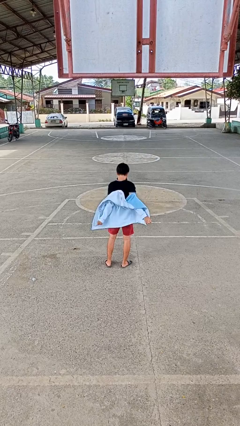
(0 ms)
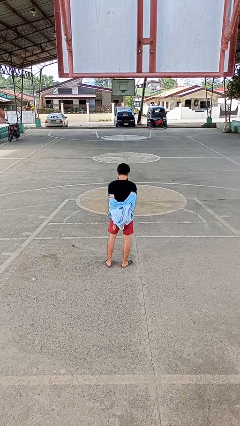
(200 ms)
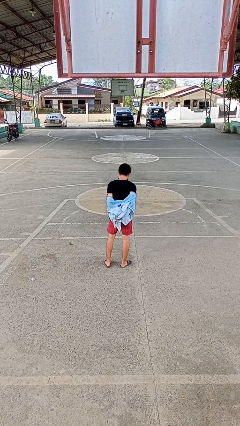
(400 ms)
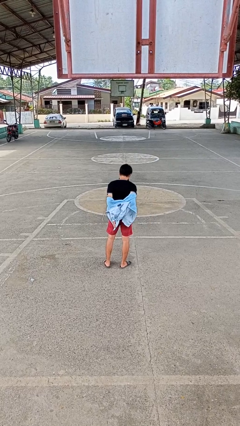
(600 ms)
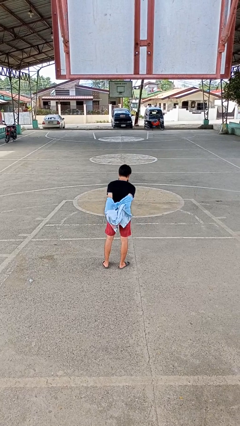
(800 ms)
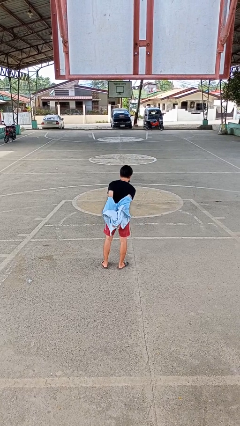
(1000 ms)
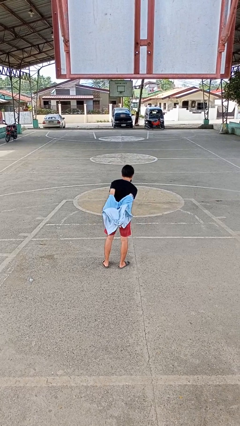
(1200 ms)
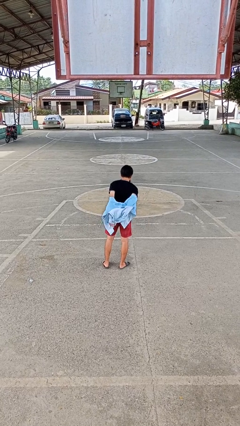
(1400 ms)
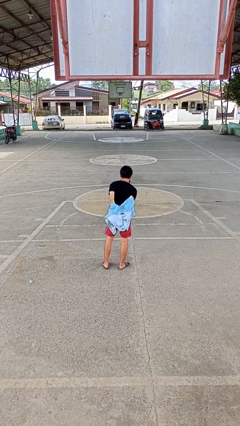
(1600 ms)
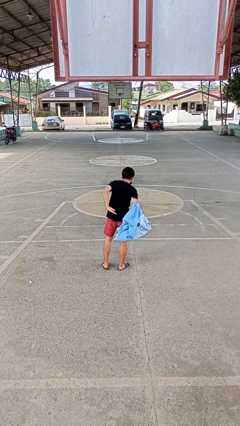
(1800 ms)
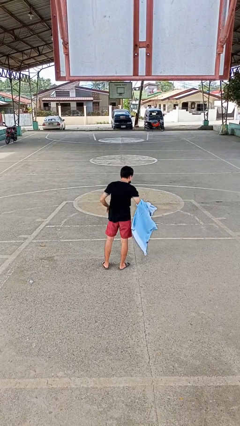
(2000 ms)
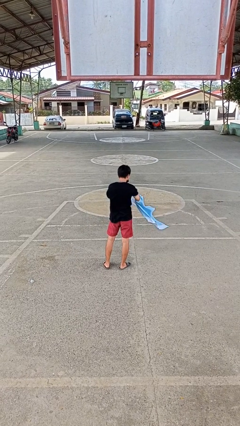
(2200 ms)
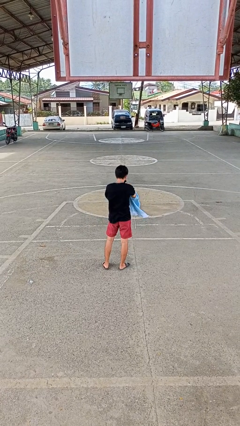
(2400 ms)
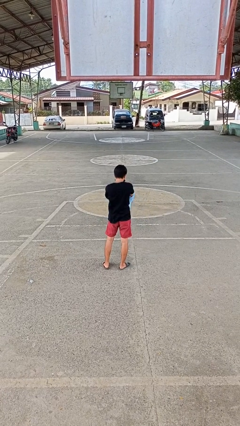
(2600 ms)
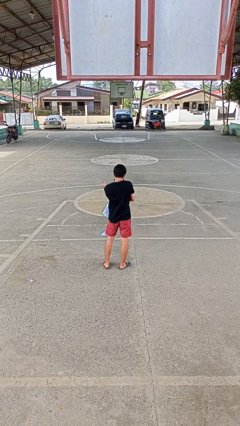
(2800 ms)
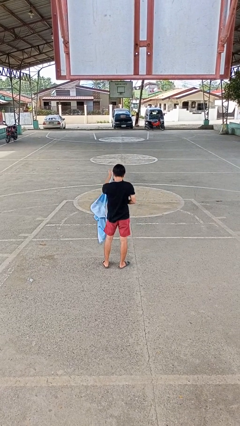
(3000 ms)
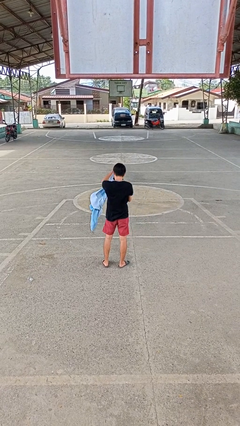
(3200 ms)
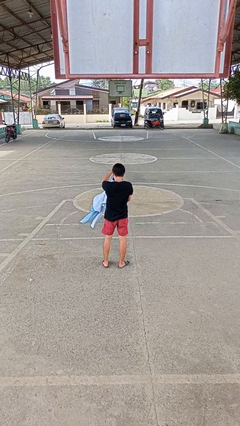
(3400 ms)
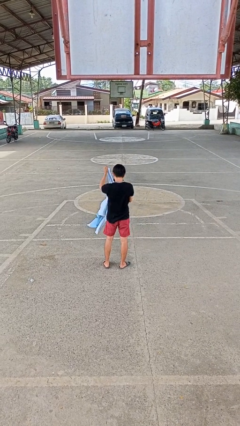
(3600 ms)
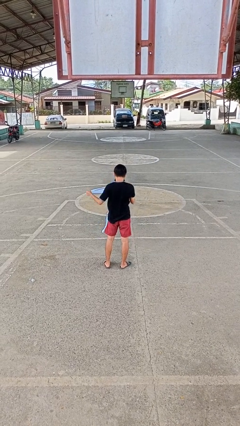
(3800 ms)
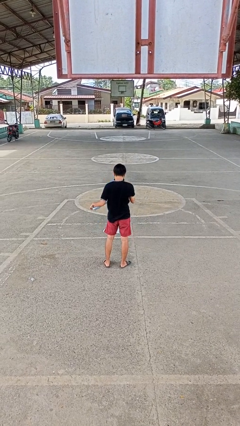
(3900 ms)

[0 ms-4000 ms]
person takes off jacket

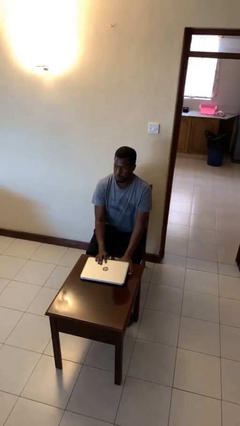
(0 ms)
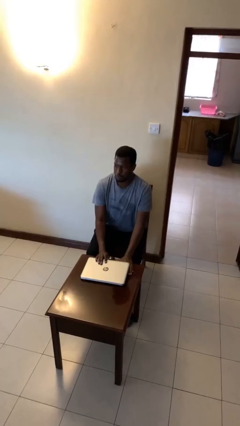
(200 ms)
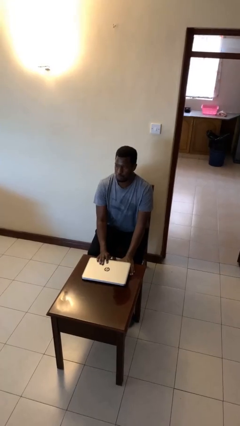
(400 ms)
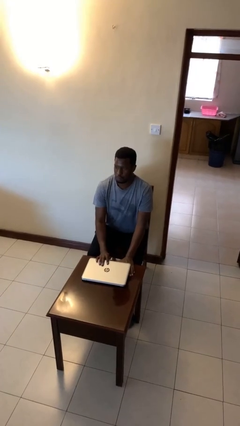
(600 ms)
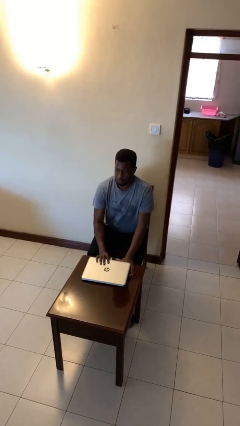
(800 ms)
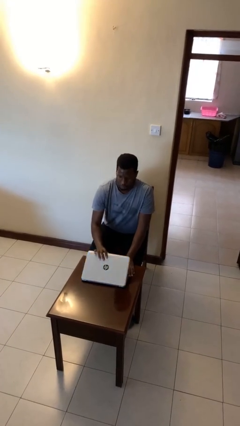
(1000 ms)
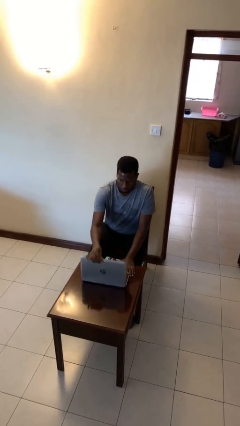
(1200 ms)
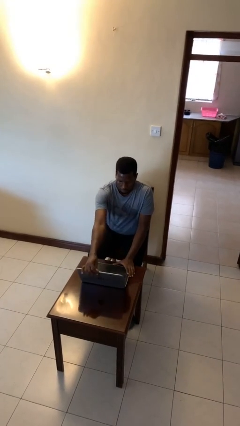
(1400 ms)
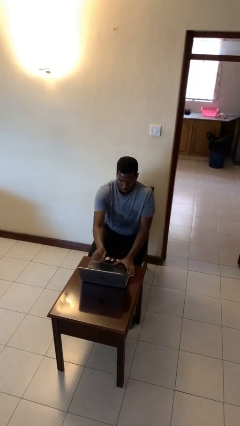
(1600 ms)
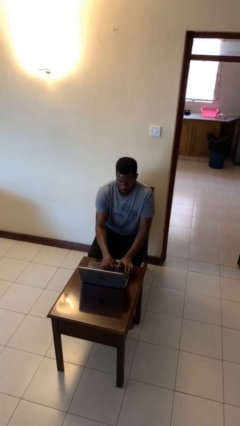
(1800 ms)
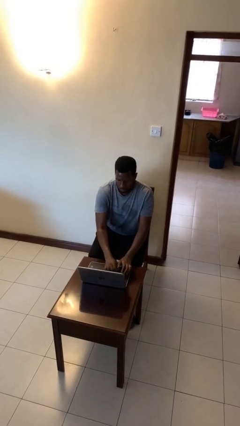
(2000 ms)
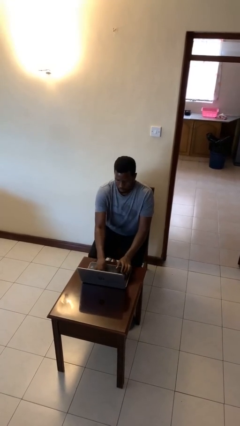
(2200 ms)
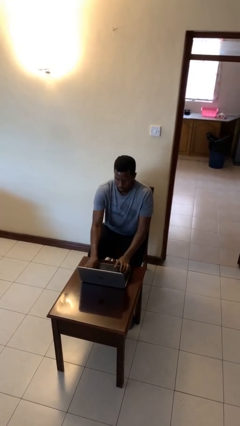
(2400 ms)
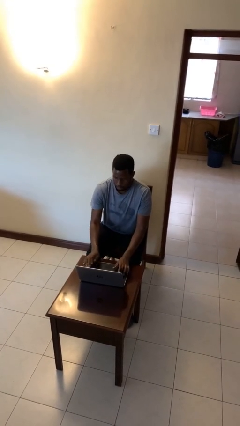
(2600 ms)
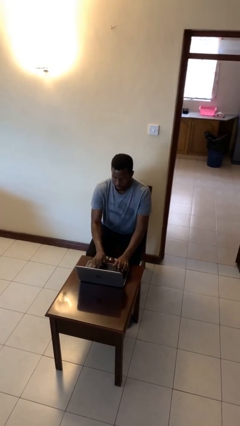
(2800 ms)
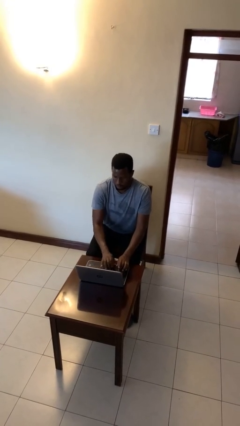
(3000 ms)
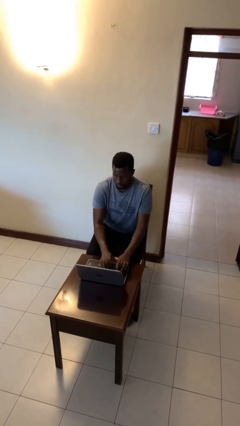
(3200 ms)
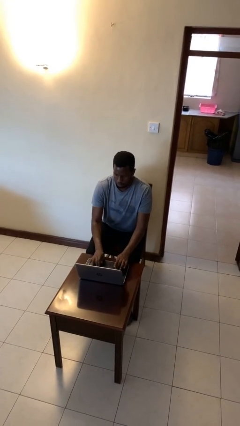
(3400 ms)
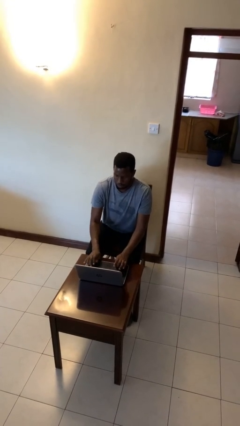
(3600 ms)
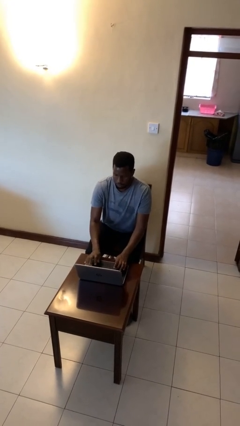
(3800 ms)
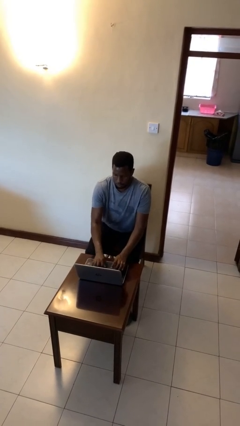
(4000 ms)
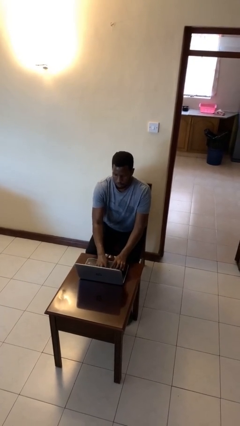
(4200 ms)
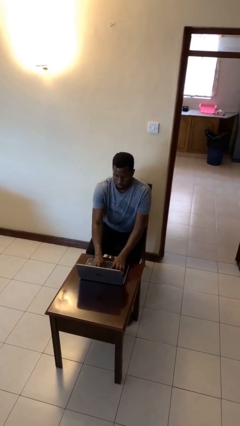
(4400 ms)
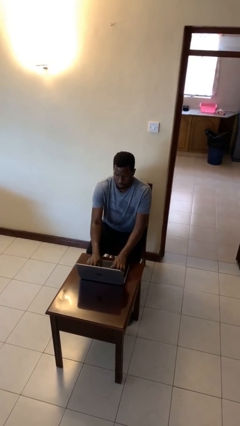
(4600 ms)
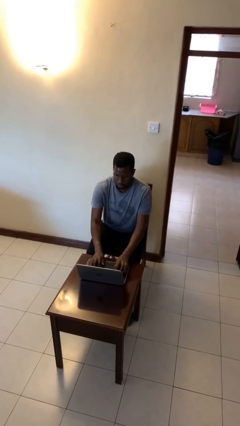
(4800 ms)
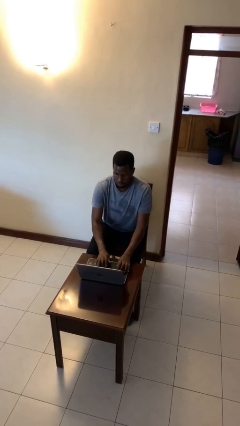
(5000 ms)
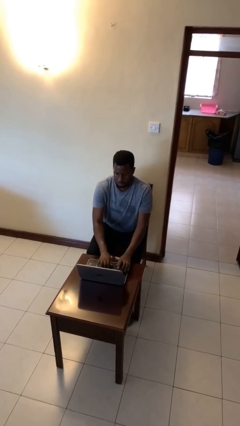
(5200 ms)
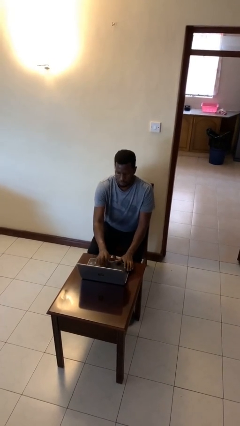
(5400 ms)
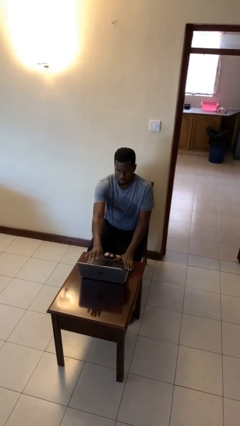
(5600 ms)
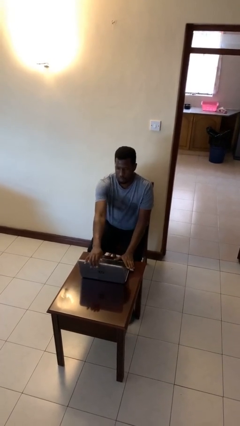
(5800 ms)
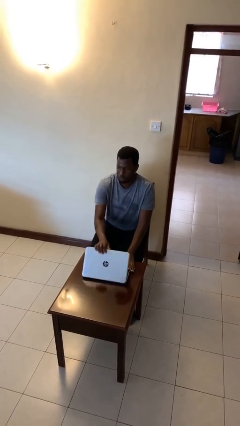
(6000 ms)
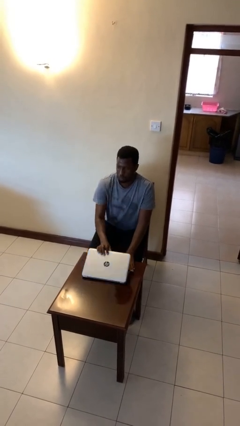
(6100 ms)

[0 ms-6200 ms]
person interacts with laptop

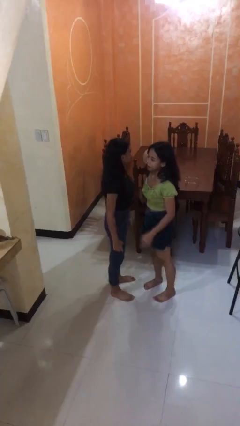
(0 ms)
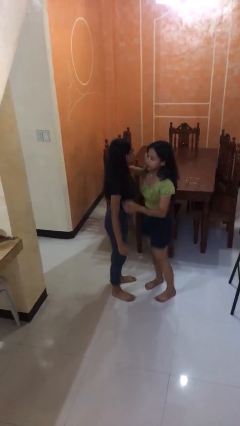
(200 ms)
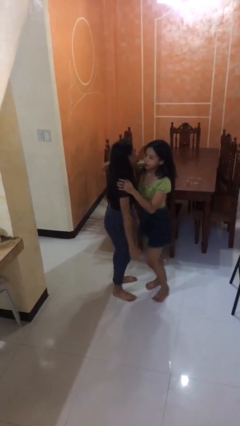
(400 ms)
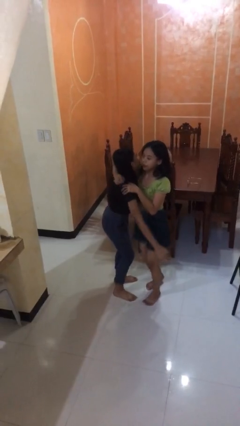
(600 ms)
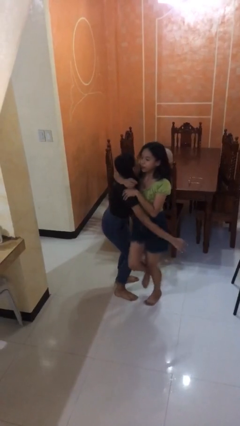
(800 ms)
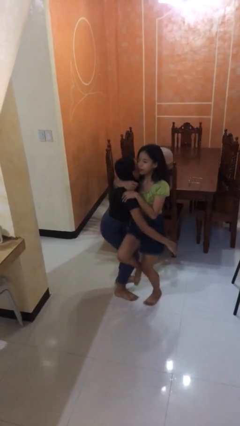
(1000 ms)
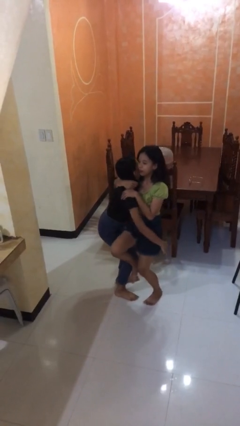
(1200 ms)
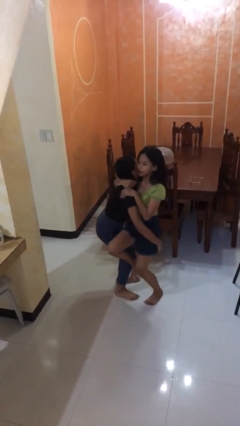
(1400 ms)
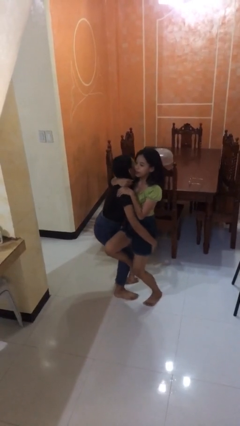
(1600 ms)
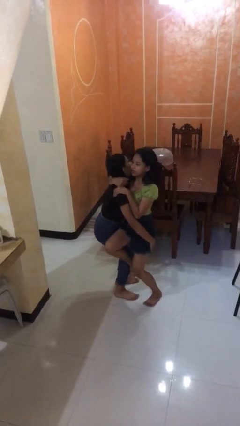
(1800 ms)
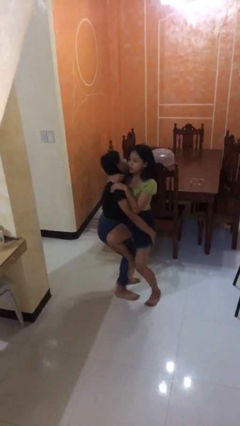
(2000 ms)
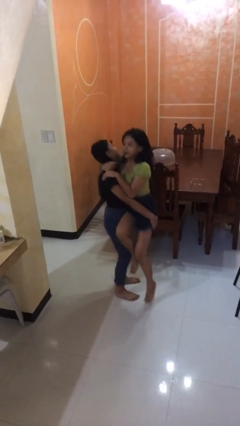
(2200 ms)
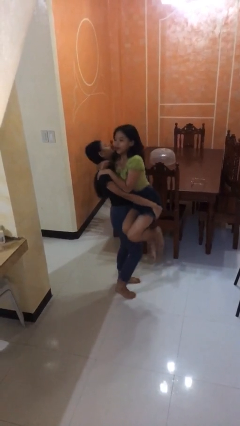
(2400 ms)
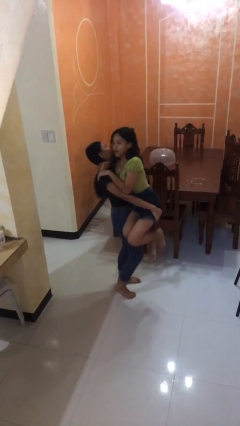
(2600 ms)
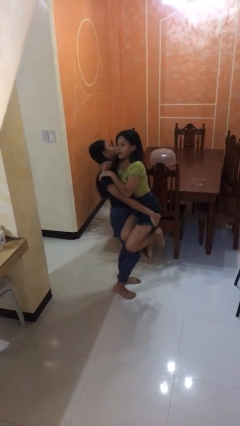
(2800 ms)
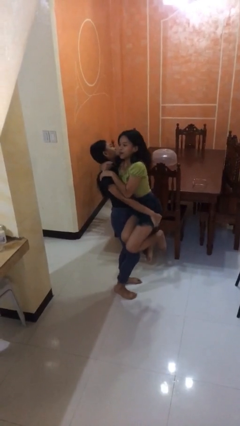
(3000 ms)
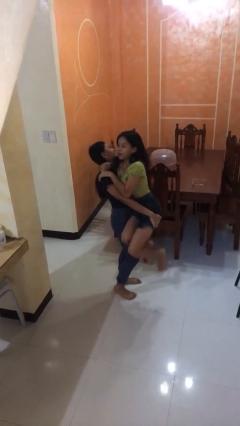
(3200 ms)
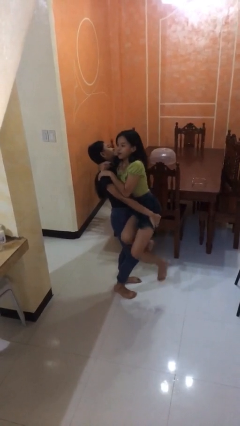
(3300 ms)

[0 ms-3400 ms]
person picks up person

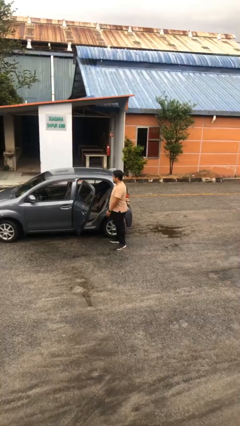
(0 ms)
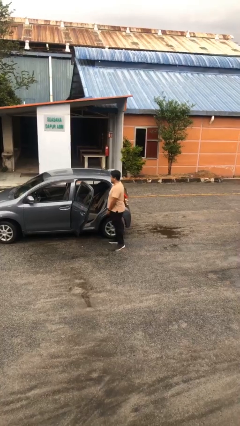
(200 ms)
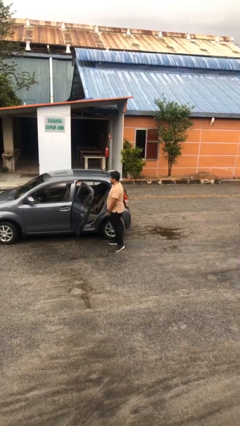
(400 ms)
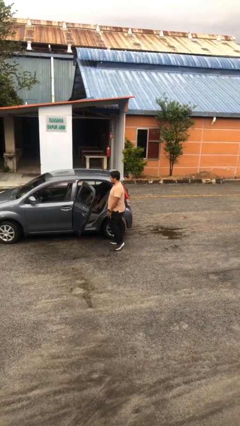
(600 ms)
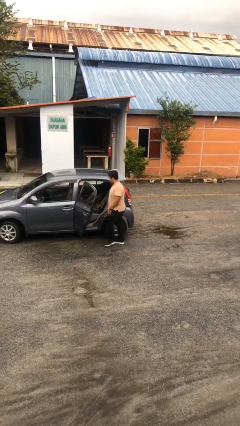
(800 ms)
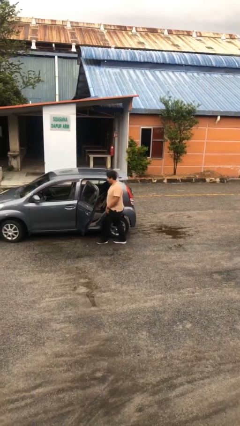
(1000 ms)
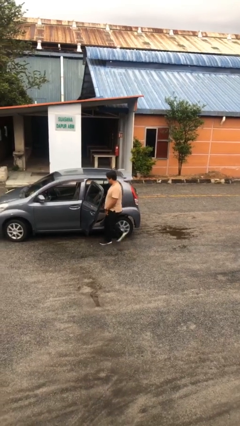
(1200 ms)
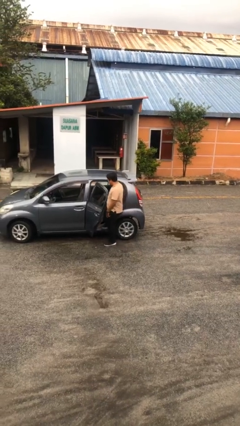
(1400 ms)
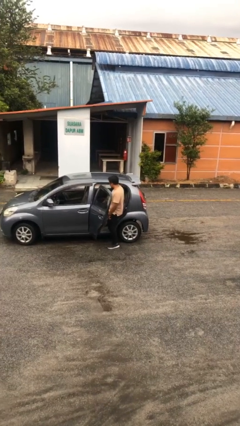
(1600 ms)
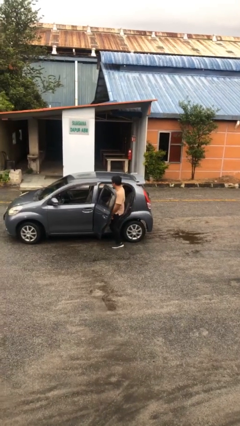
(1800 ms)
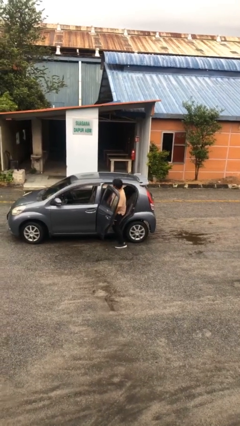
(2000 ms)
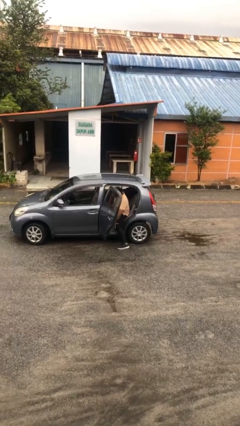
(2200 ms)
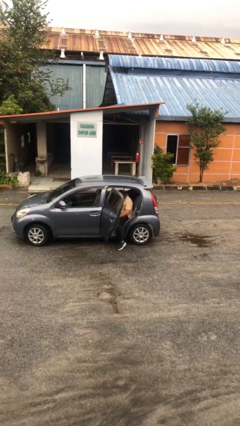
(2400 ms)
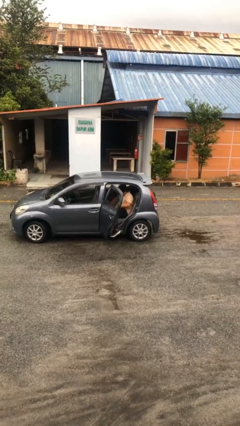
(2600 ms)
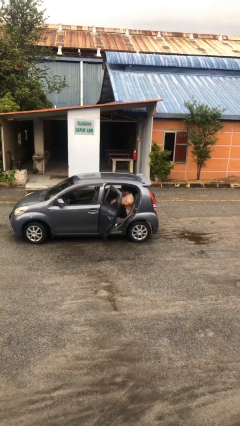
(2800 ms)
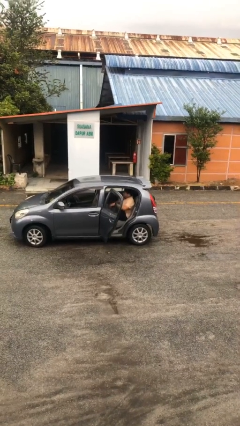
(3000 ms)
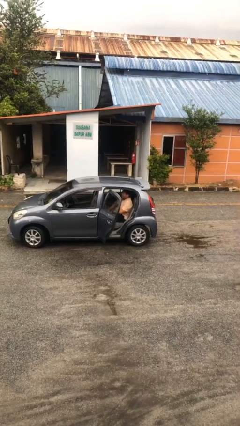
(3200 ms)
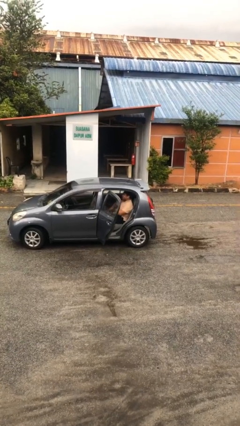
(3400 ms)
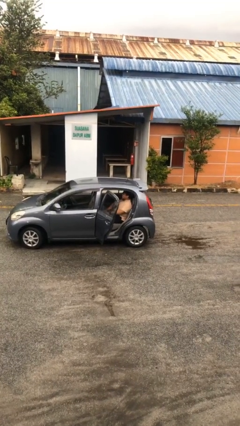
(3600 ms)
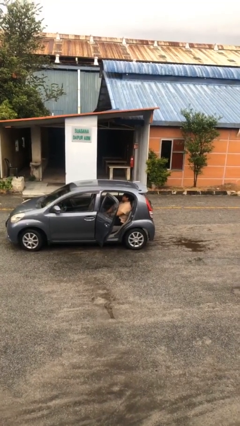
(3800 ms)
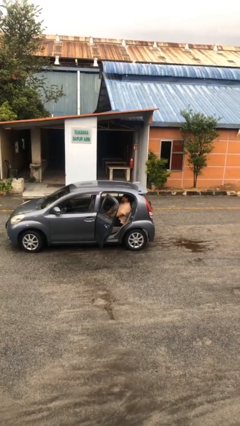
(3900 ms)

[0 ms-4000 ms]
person enters car

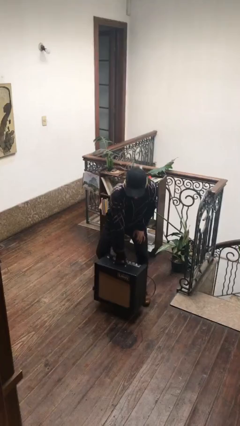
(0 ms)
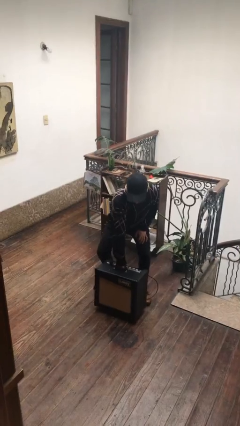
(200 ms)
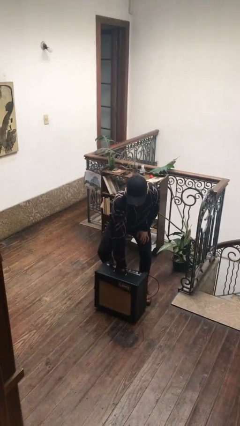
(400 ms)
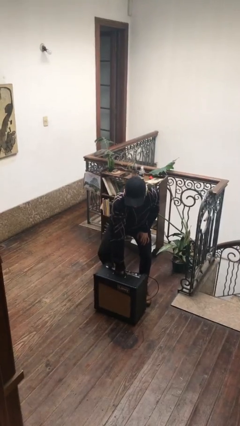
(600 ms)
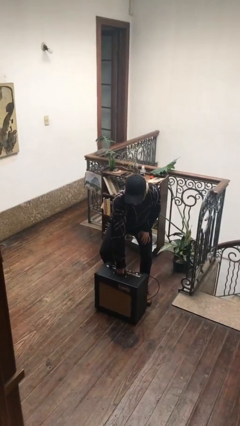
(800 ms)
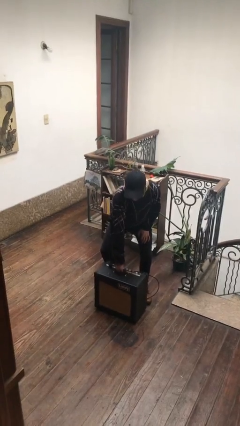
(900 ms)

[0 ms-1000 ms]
person puts down object on floor
